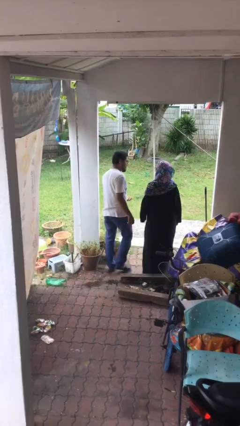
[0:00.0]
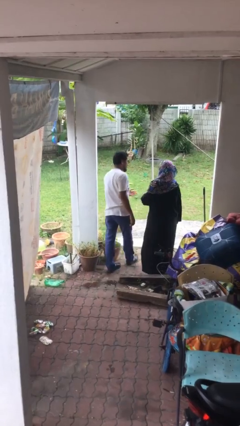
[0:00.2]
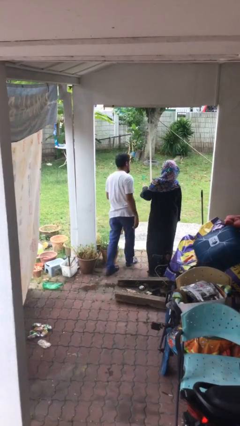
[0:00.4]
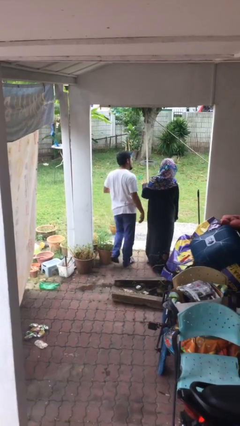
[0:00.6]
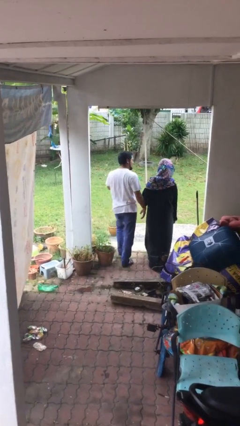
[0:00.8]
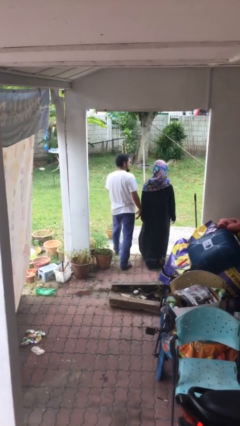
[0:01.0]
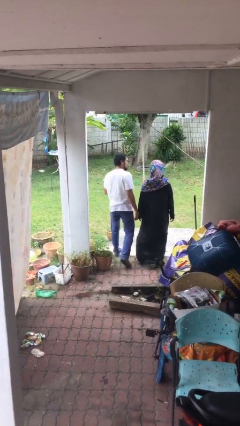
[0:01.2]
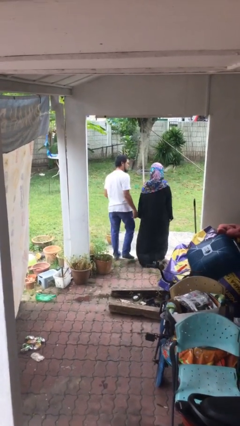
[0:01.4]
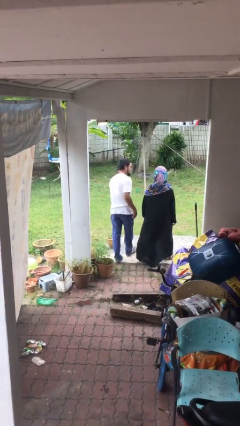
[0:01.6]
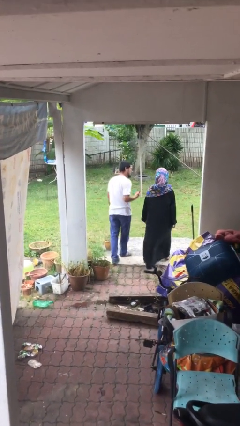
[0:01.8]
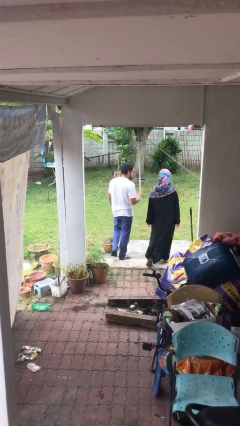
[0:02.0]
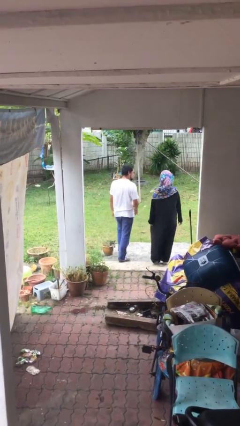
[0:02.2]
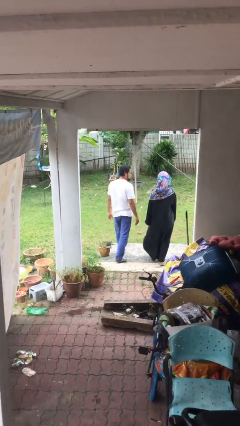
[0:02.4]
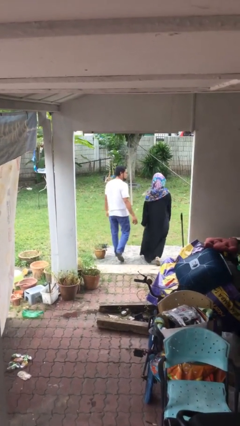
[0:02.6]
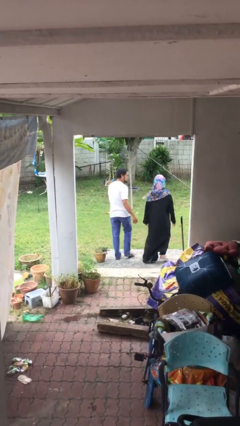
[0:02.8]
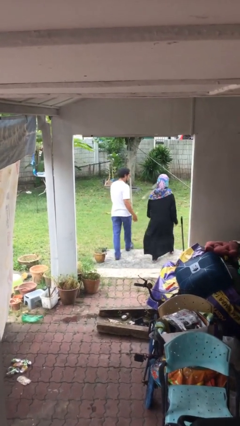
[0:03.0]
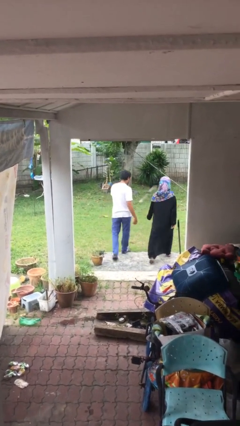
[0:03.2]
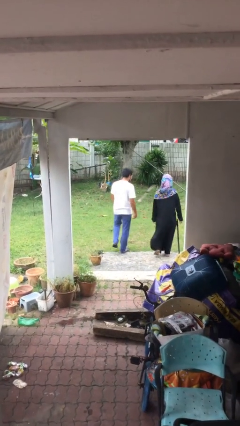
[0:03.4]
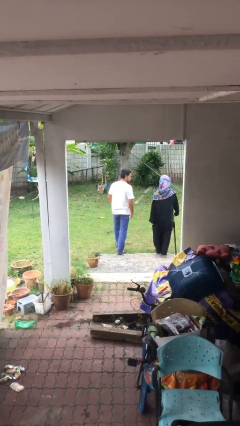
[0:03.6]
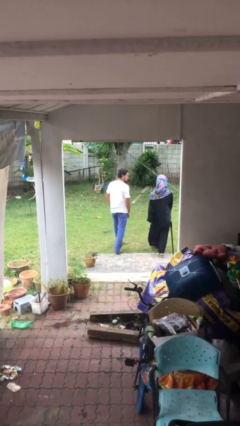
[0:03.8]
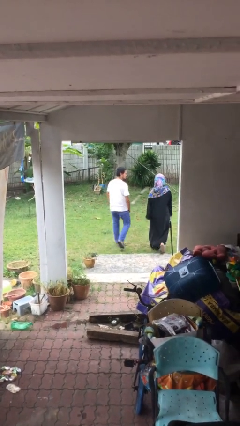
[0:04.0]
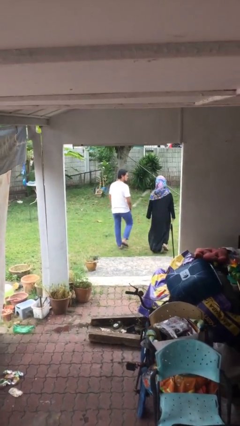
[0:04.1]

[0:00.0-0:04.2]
person talks to person

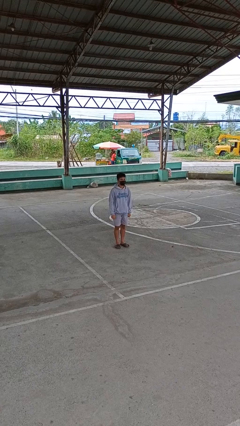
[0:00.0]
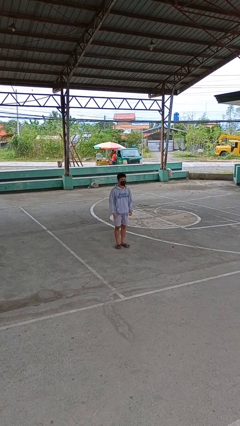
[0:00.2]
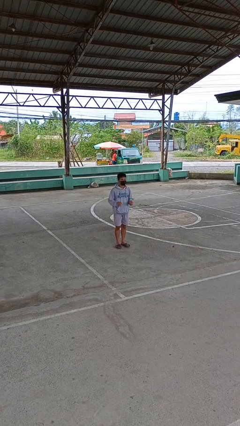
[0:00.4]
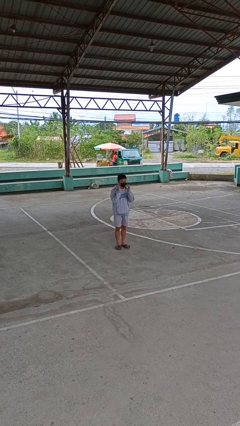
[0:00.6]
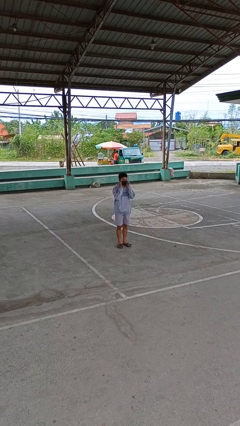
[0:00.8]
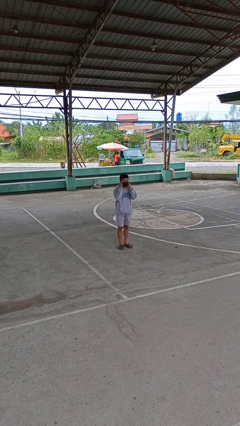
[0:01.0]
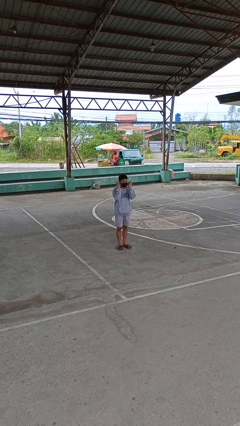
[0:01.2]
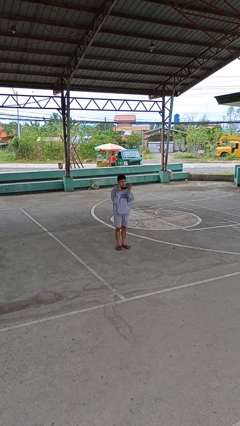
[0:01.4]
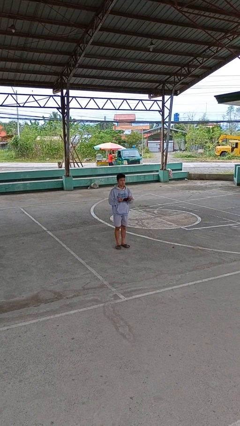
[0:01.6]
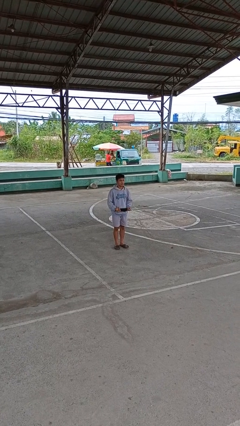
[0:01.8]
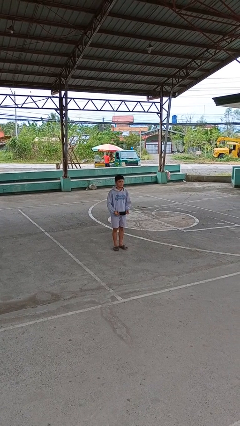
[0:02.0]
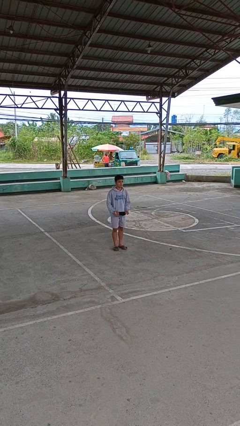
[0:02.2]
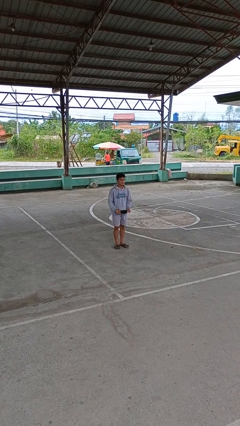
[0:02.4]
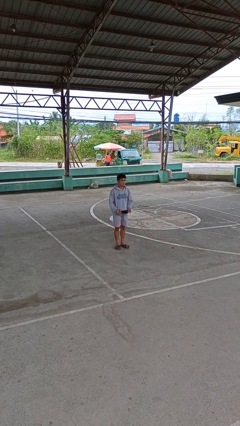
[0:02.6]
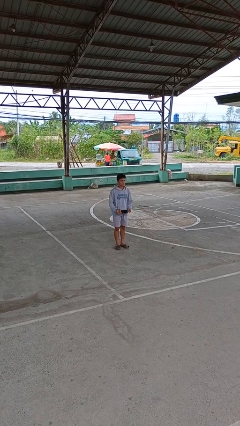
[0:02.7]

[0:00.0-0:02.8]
person takes off facemask

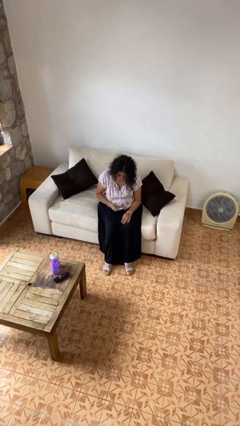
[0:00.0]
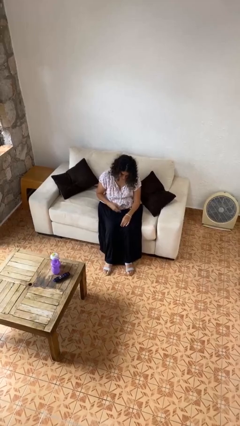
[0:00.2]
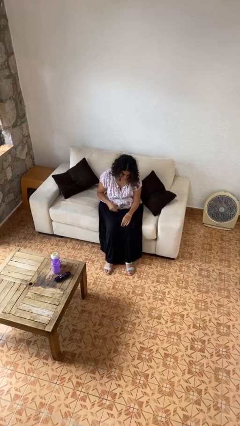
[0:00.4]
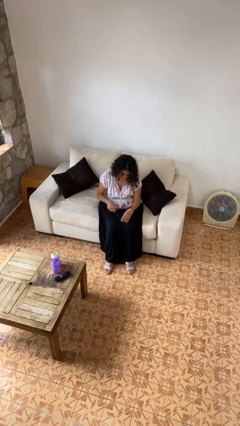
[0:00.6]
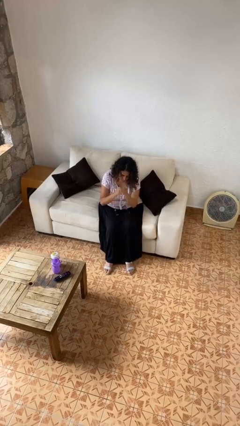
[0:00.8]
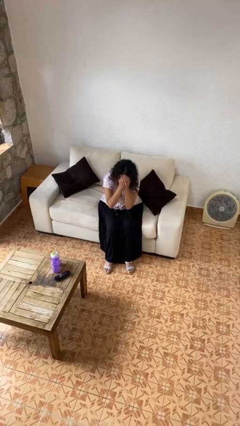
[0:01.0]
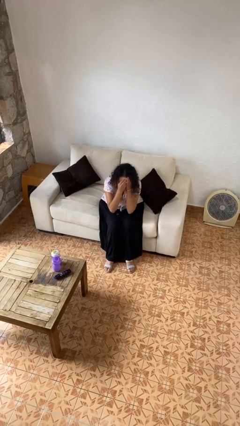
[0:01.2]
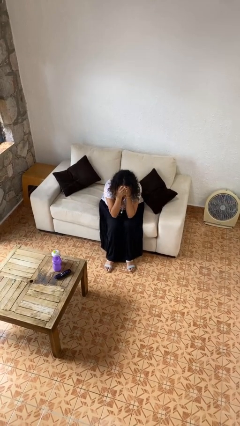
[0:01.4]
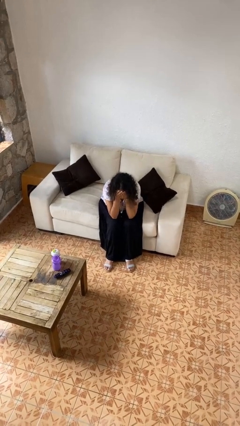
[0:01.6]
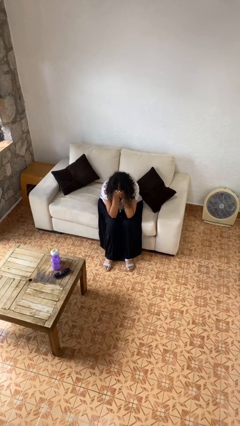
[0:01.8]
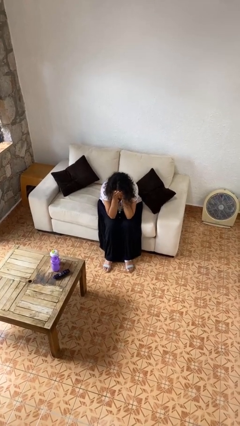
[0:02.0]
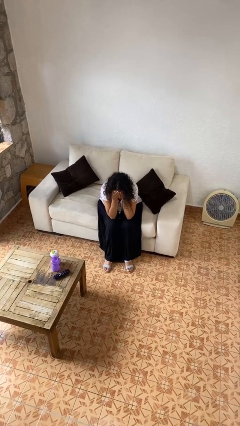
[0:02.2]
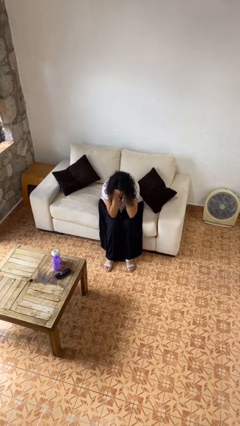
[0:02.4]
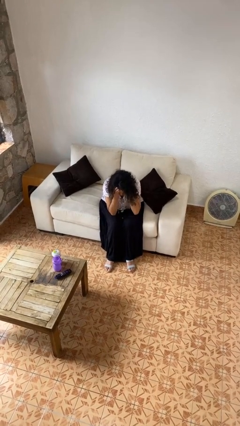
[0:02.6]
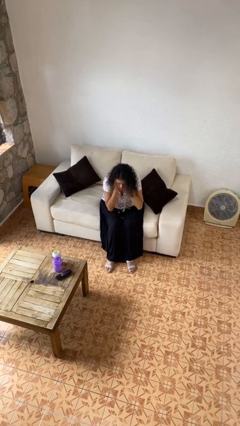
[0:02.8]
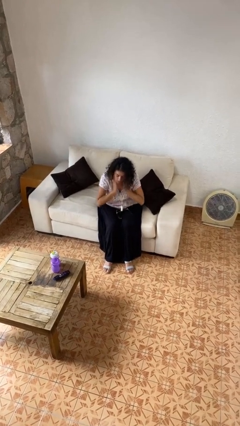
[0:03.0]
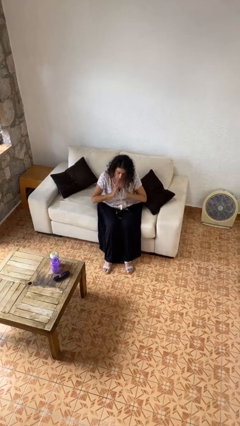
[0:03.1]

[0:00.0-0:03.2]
person covers face with hands

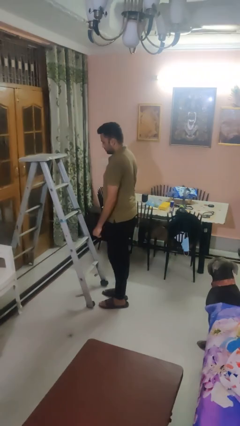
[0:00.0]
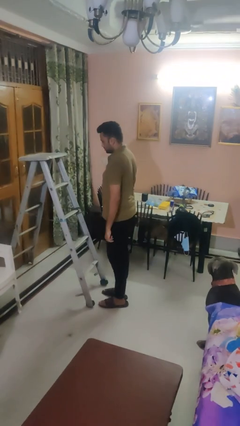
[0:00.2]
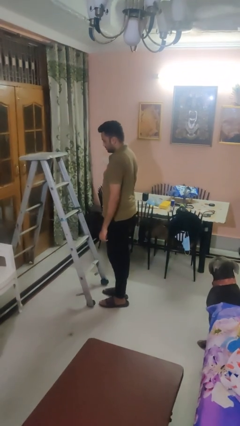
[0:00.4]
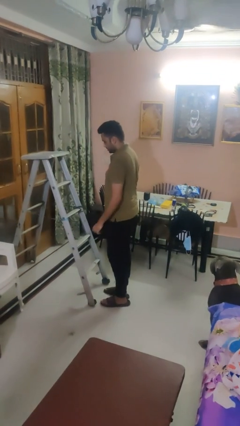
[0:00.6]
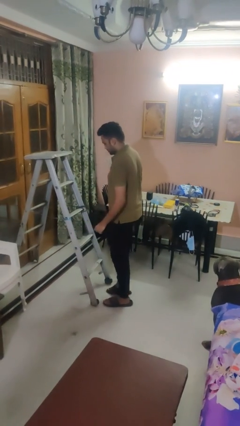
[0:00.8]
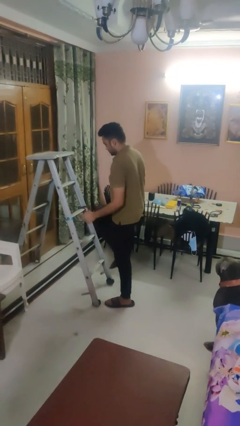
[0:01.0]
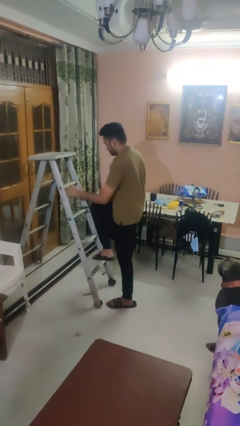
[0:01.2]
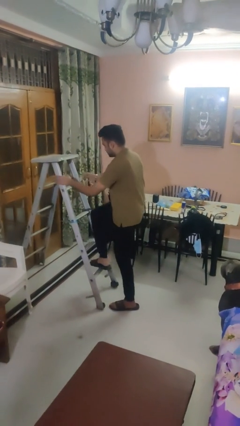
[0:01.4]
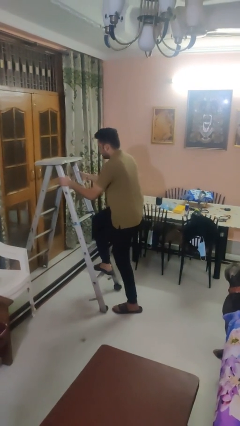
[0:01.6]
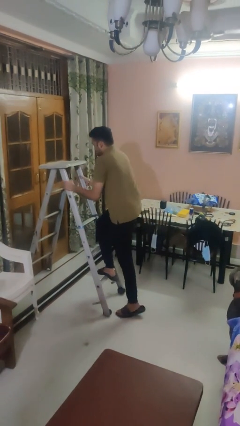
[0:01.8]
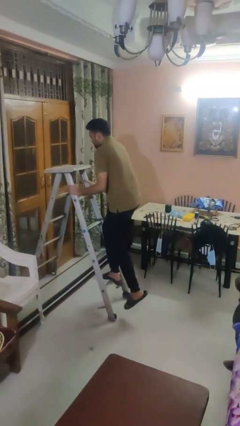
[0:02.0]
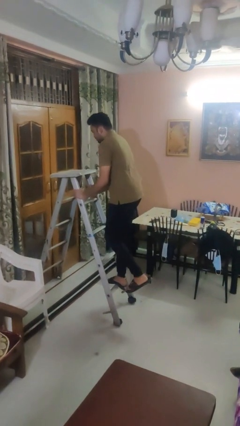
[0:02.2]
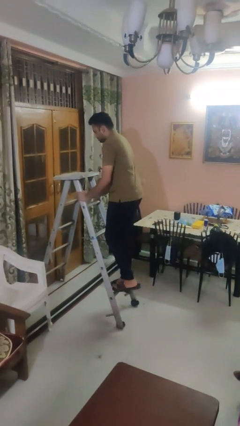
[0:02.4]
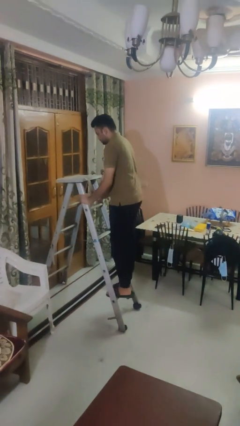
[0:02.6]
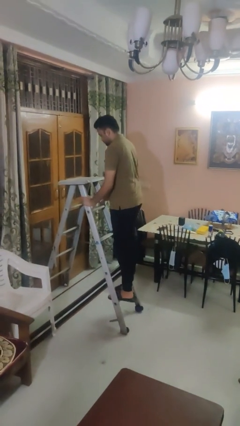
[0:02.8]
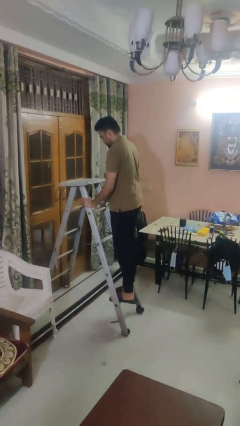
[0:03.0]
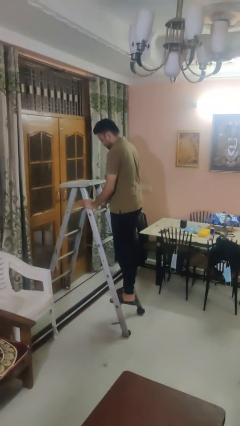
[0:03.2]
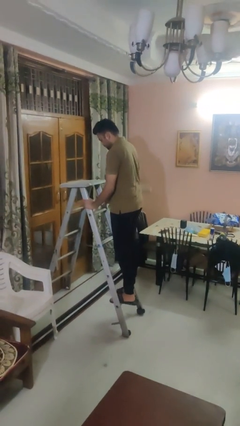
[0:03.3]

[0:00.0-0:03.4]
person climbs up ladder

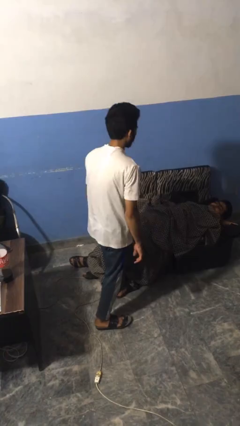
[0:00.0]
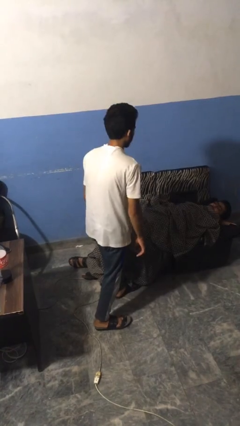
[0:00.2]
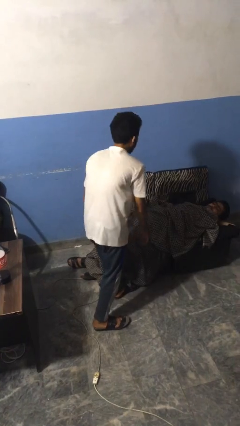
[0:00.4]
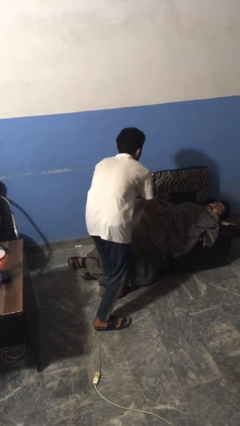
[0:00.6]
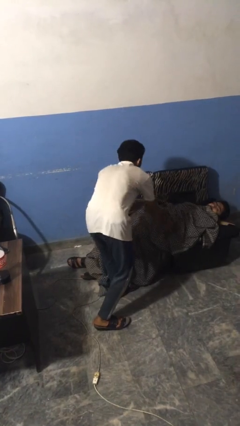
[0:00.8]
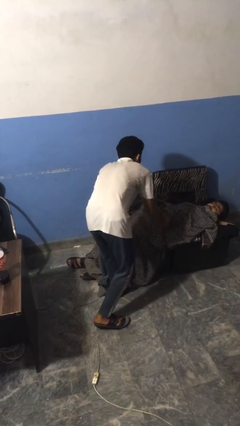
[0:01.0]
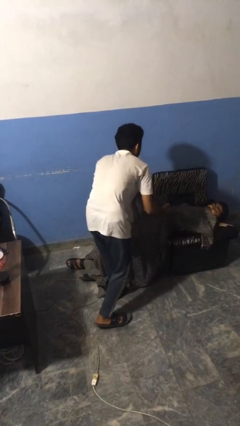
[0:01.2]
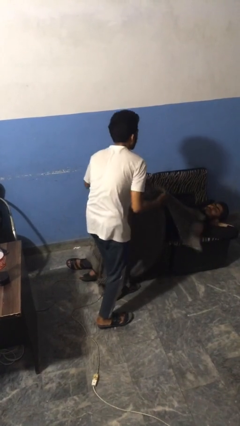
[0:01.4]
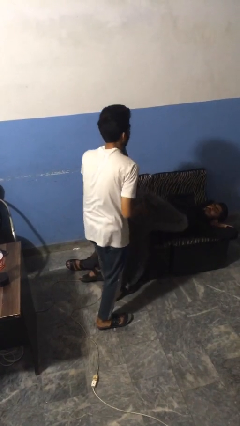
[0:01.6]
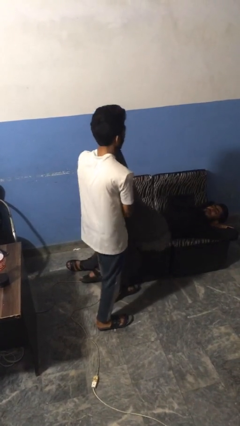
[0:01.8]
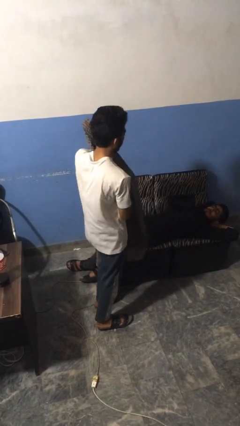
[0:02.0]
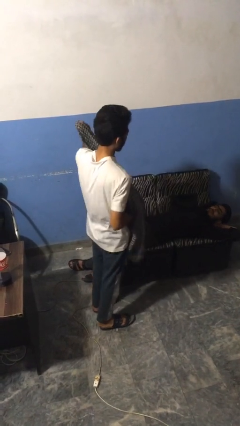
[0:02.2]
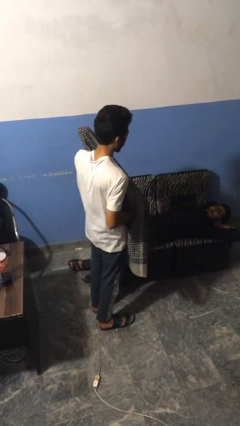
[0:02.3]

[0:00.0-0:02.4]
person uncovers friend with blanket

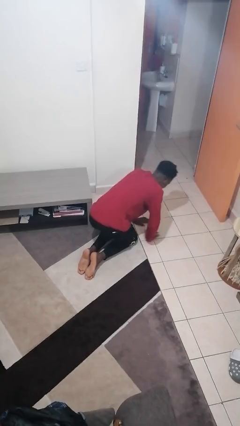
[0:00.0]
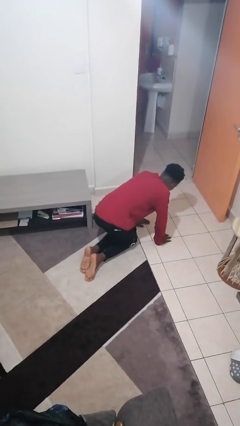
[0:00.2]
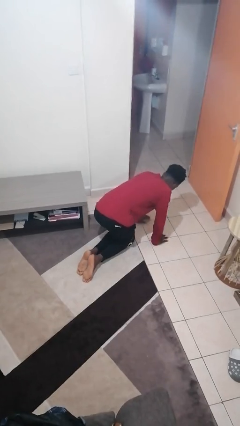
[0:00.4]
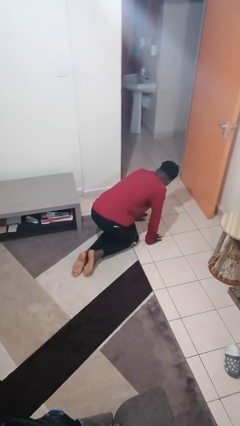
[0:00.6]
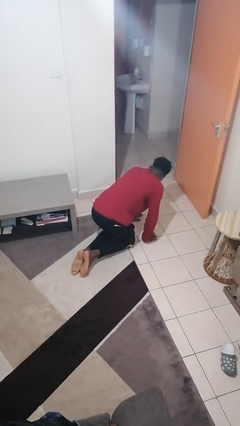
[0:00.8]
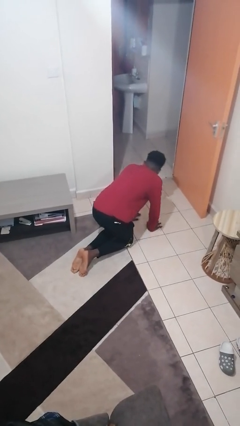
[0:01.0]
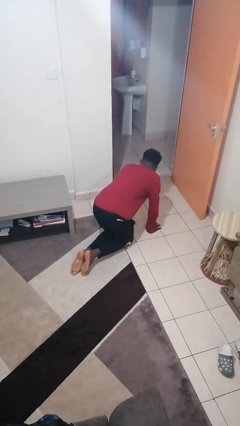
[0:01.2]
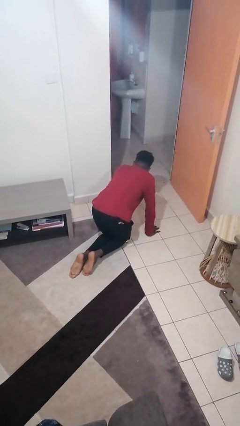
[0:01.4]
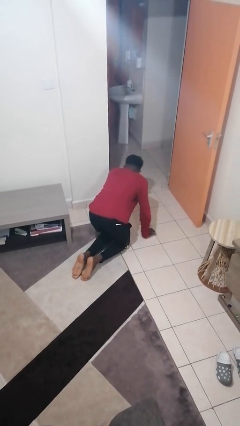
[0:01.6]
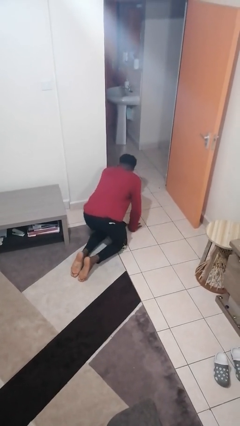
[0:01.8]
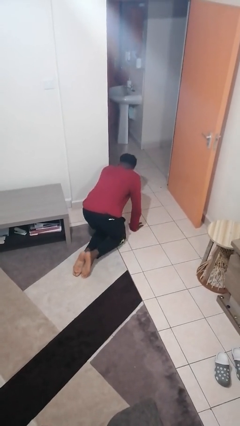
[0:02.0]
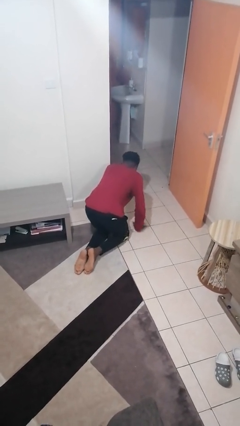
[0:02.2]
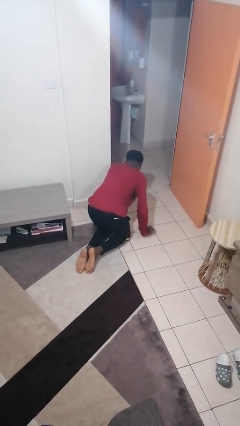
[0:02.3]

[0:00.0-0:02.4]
person crawls
